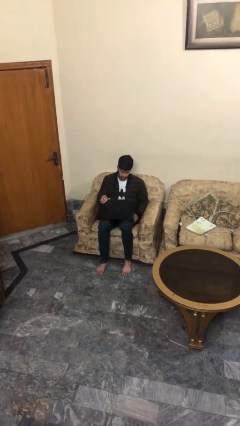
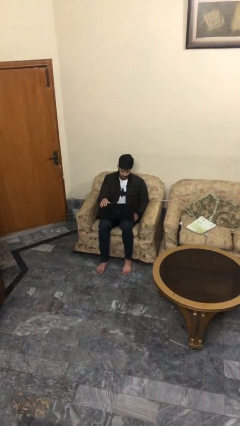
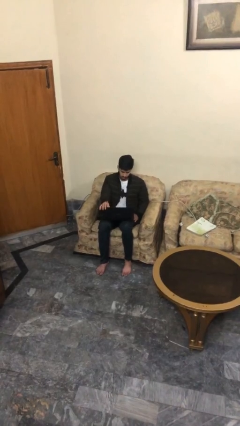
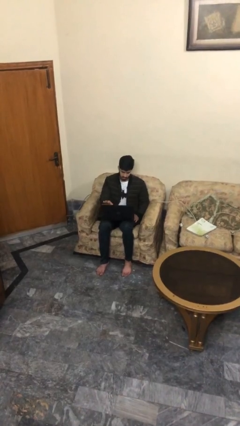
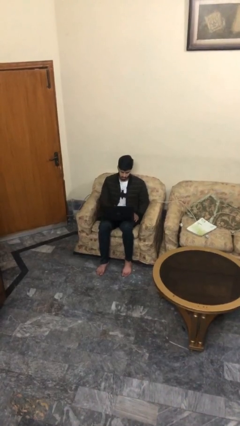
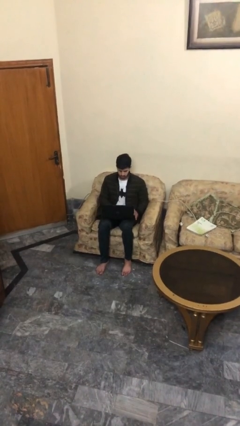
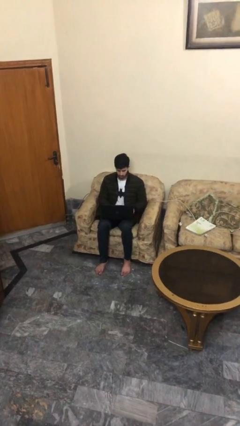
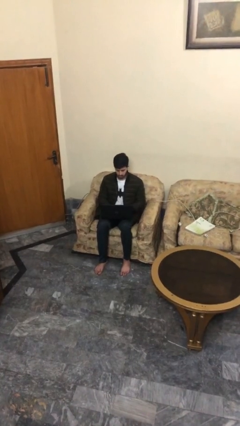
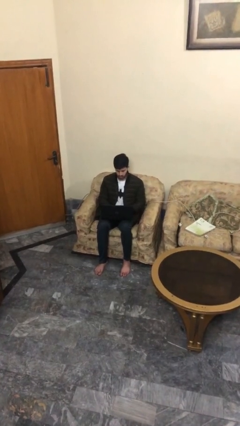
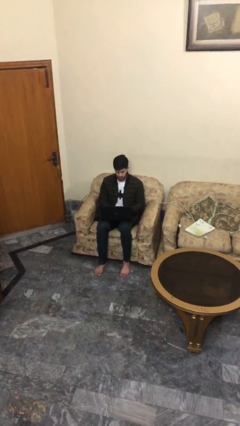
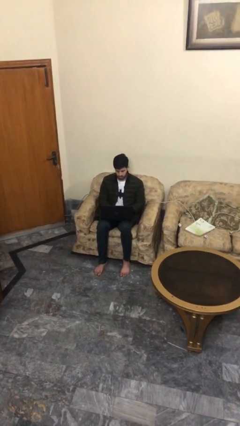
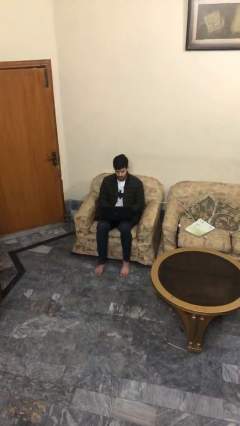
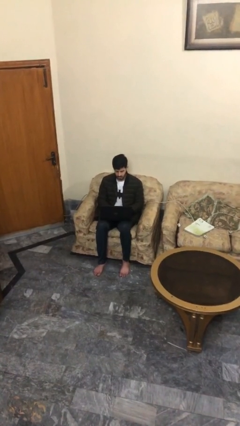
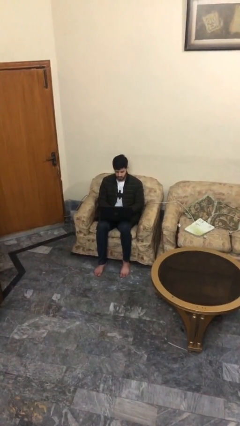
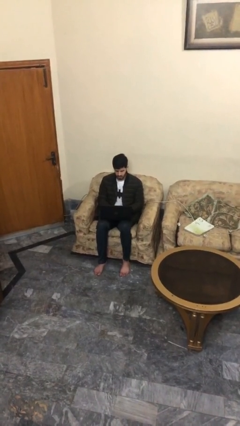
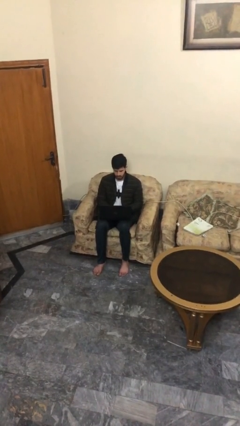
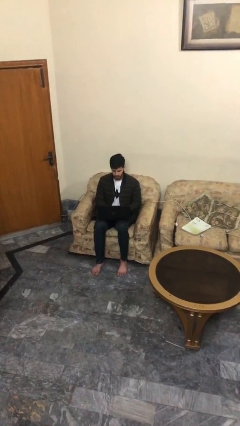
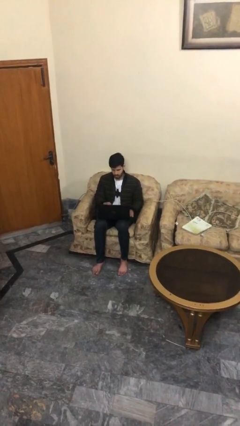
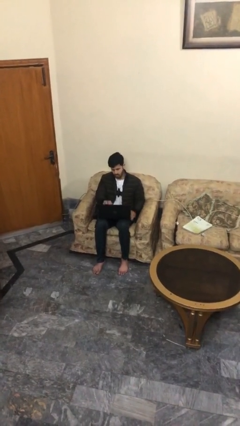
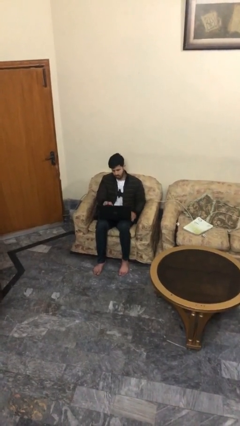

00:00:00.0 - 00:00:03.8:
person interacts with laptop

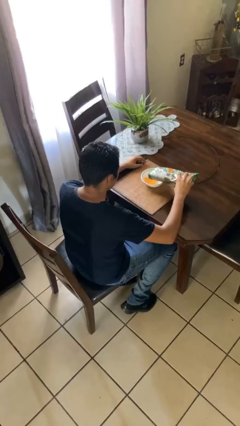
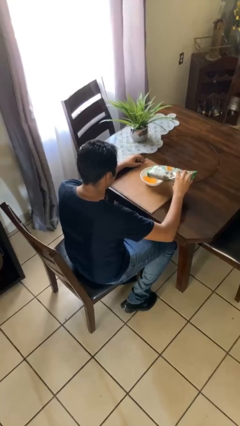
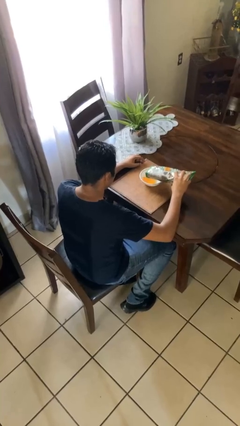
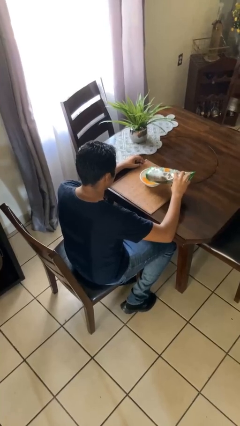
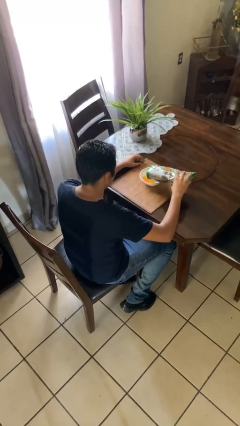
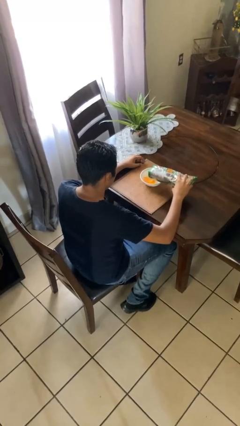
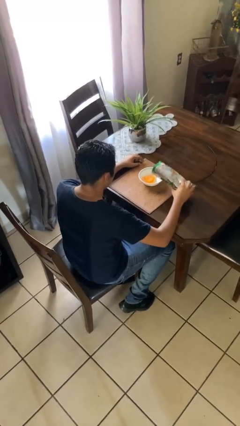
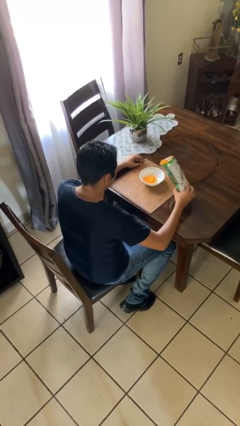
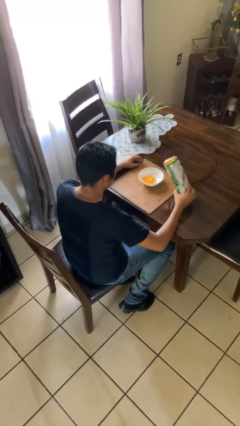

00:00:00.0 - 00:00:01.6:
person pours into bowl

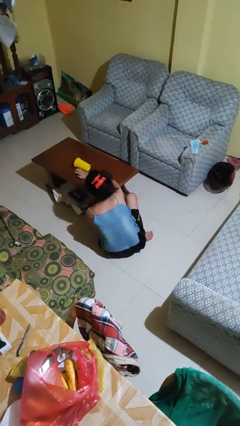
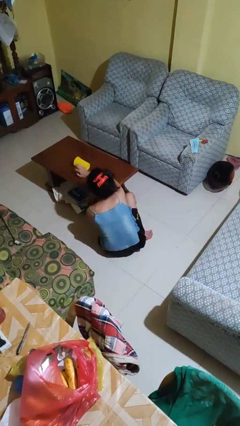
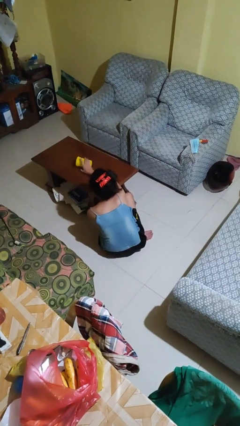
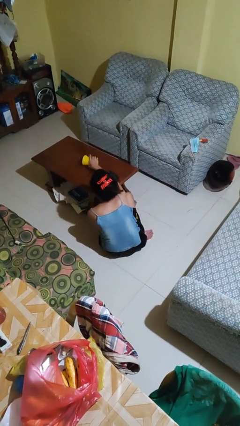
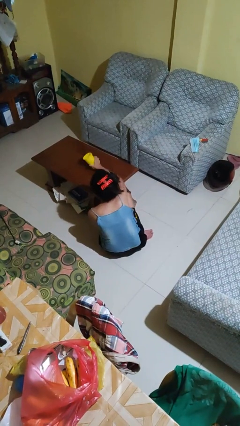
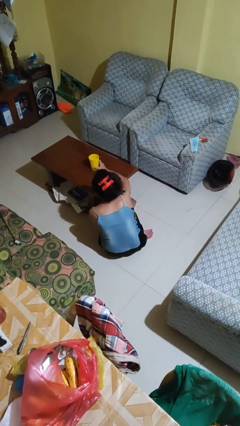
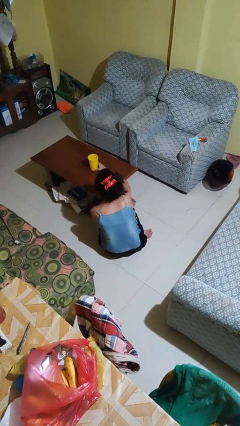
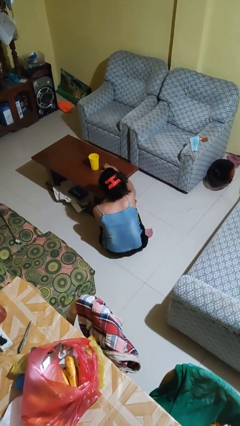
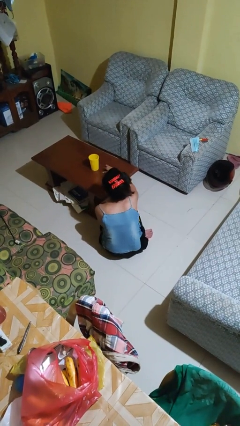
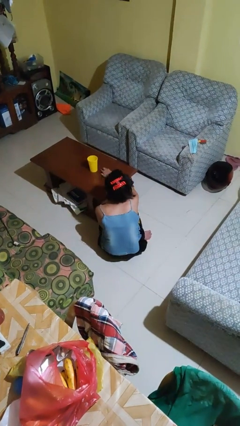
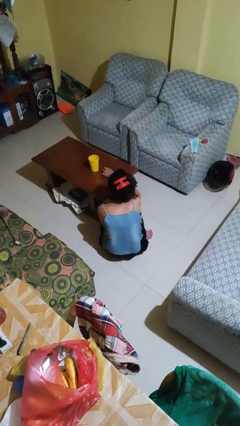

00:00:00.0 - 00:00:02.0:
person sets upright glass

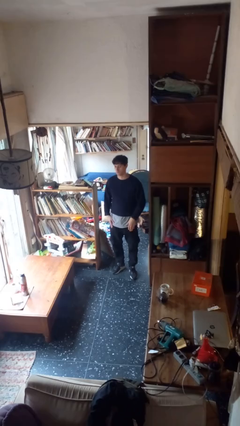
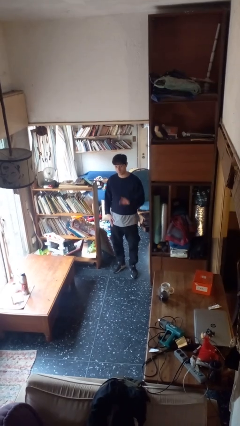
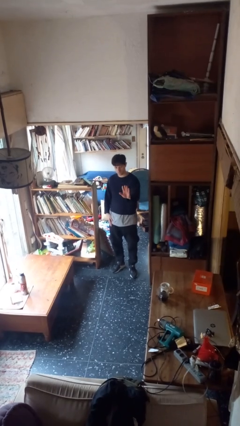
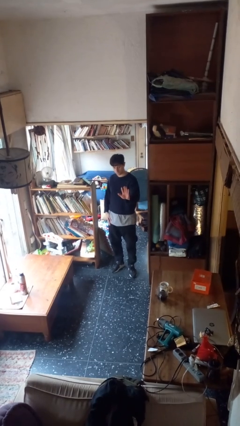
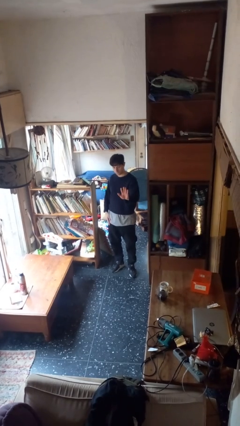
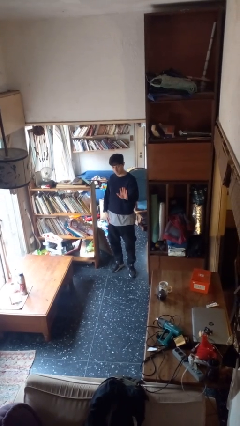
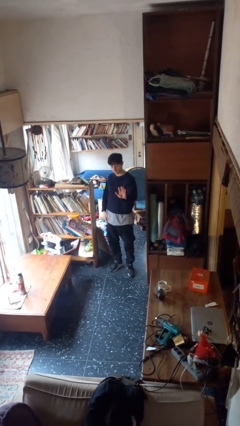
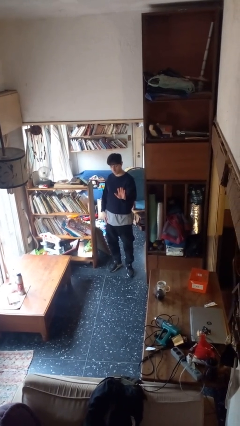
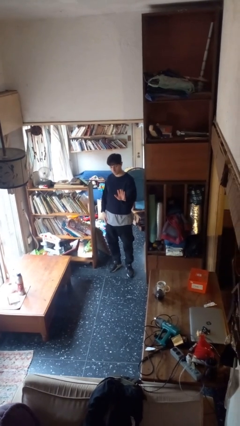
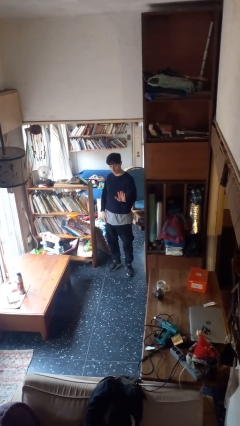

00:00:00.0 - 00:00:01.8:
person gestures stop

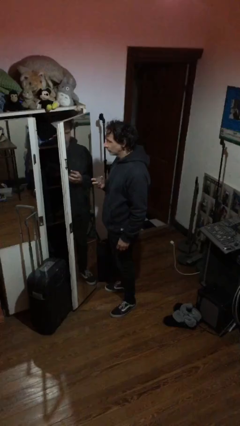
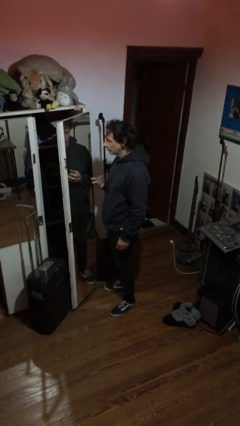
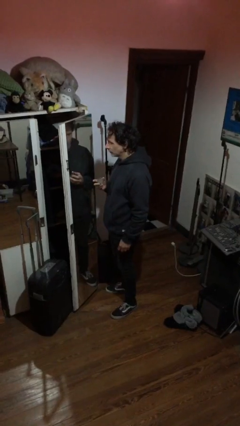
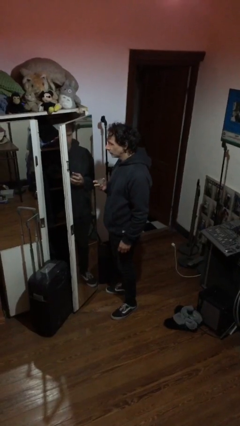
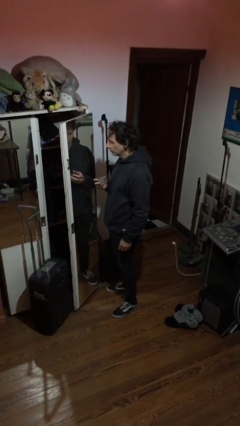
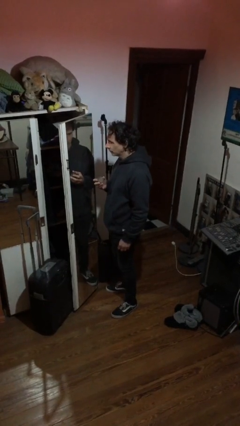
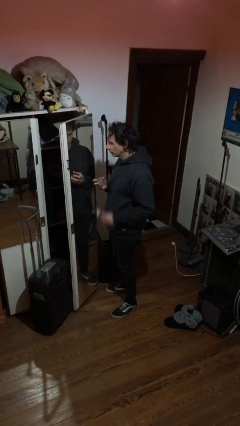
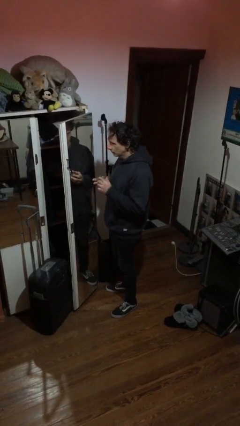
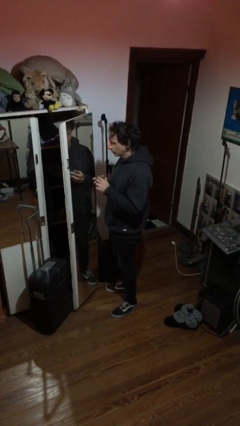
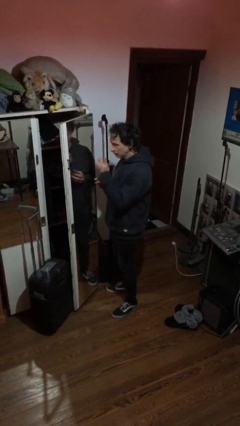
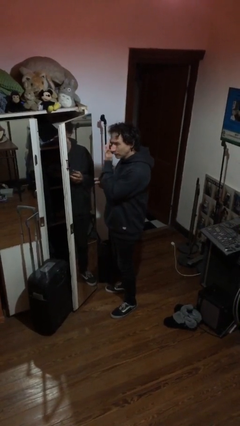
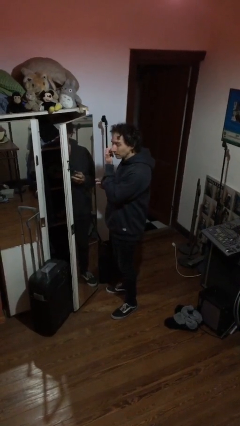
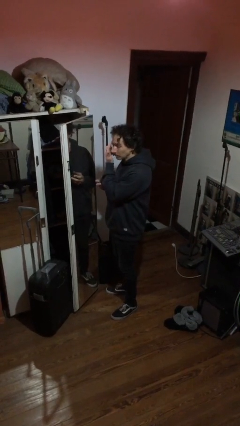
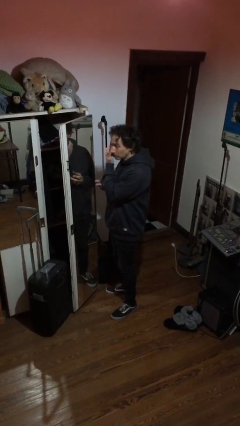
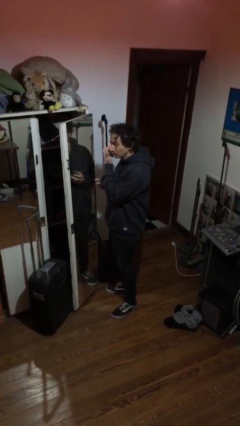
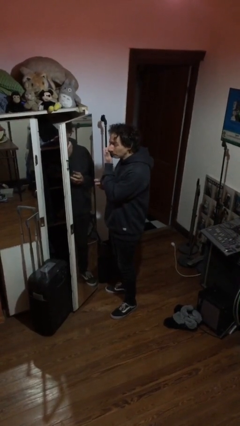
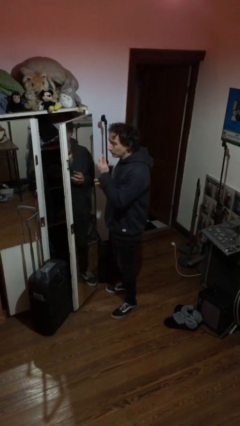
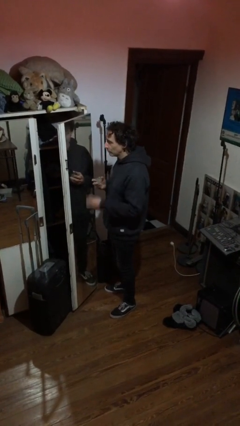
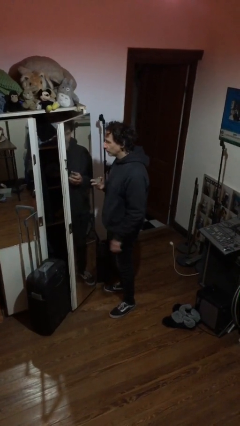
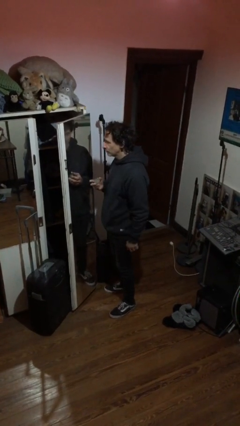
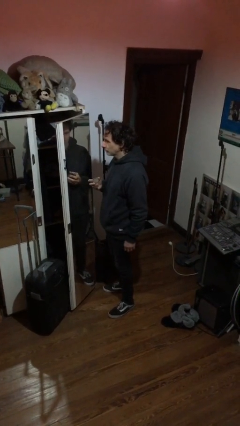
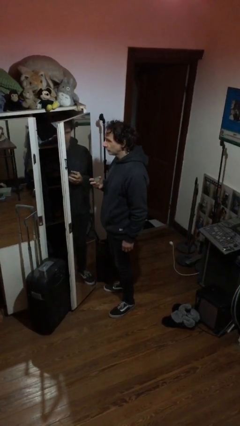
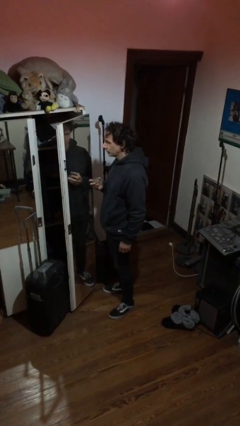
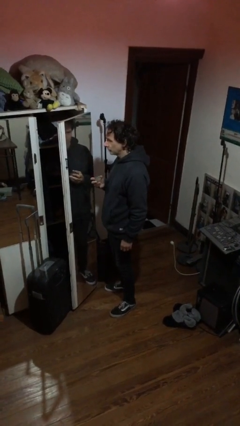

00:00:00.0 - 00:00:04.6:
person applies eye makeup

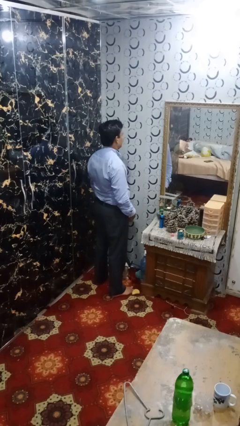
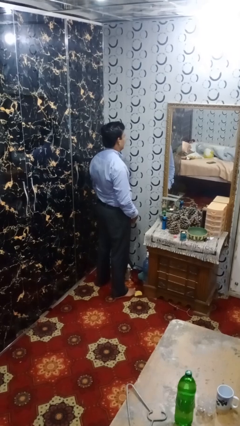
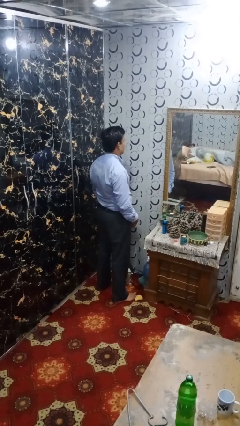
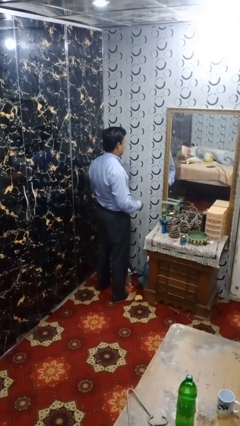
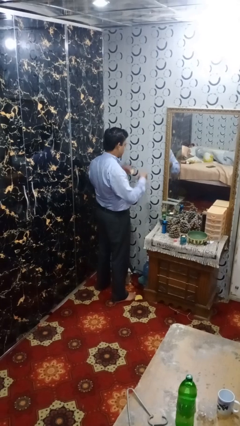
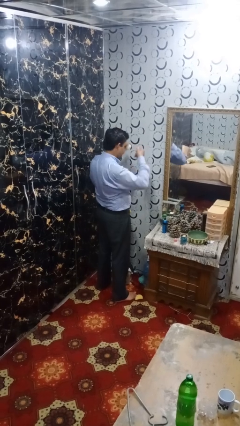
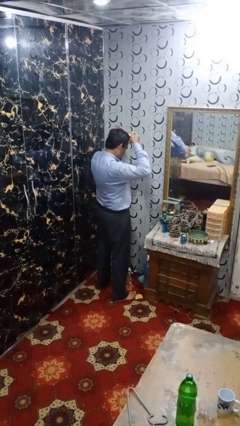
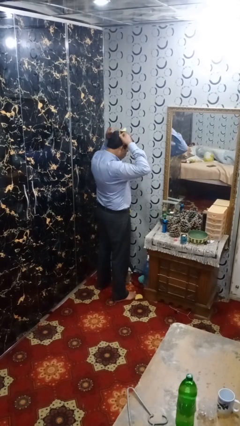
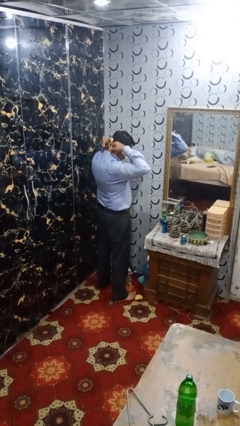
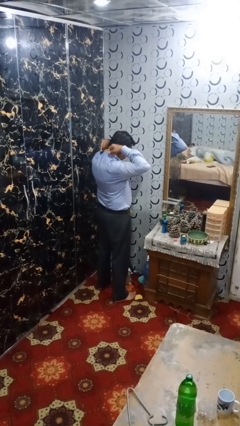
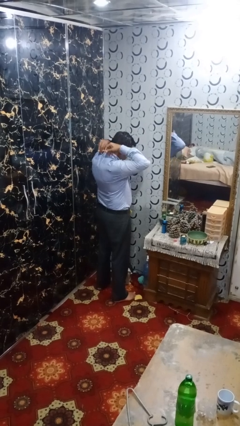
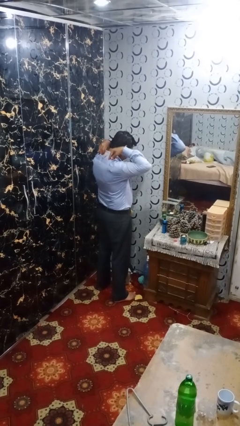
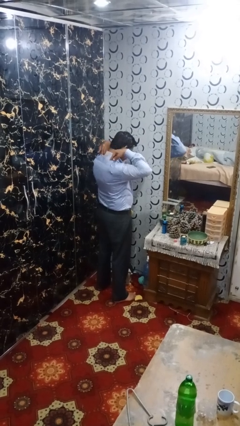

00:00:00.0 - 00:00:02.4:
person puts on necklace

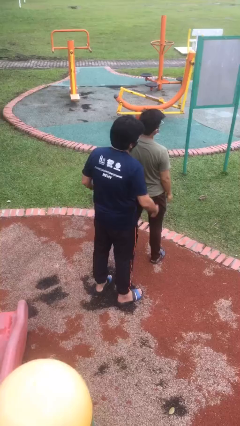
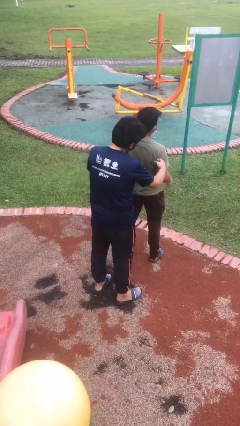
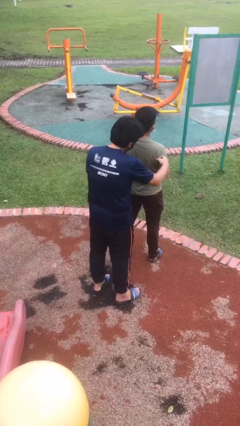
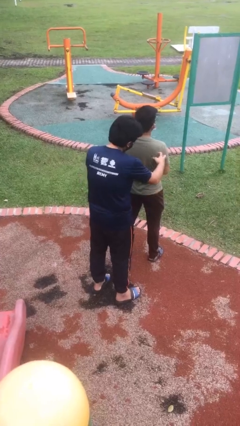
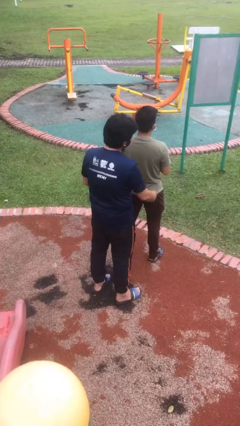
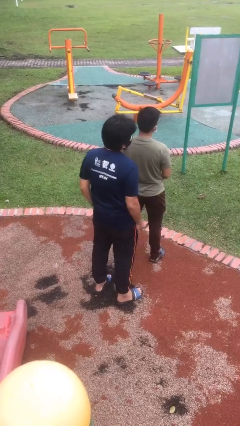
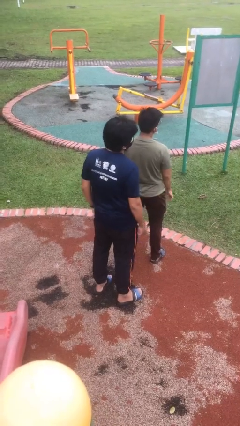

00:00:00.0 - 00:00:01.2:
person tickles person
